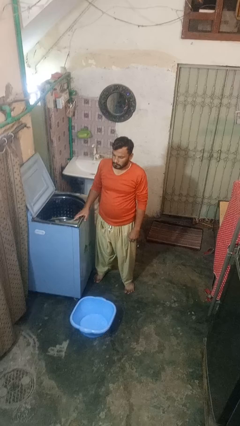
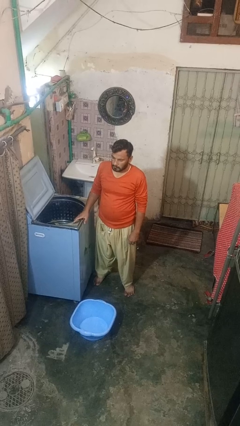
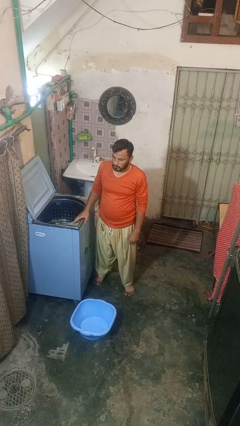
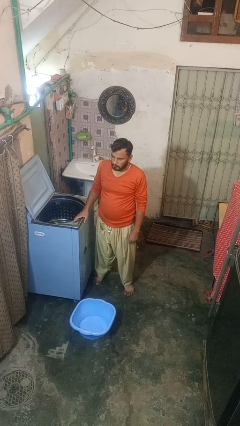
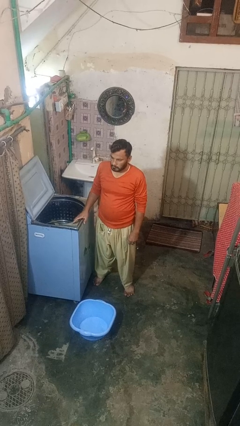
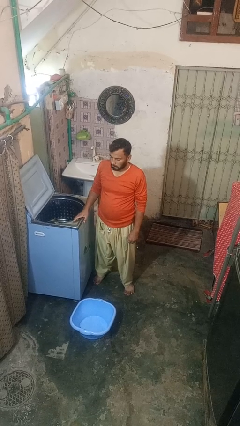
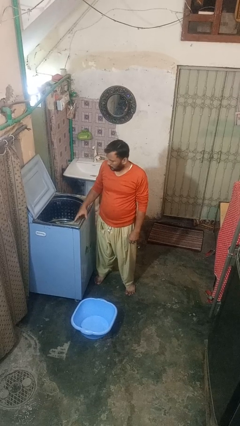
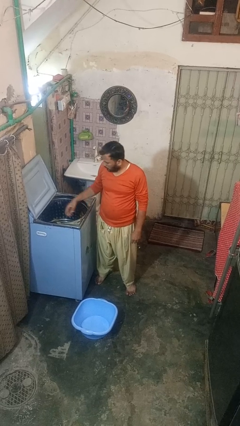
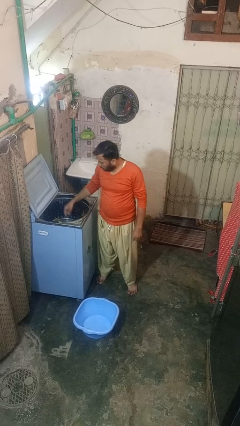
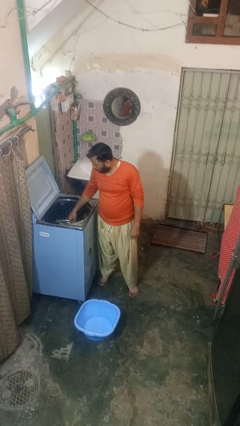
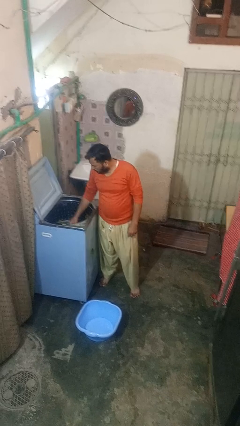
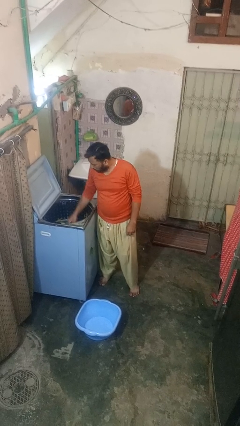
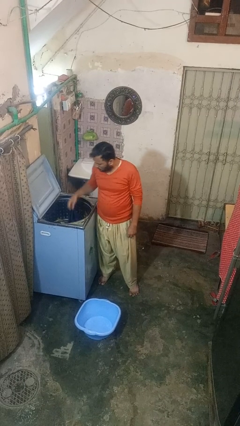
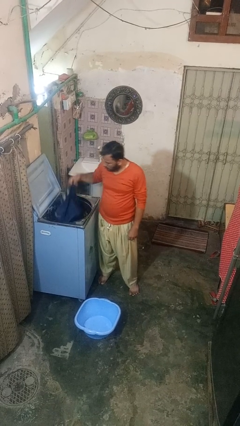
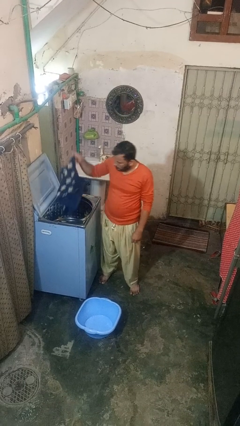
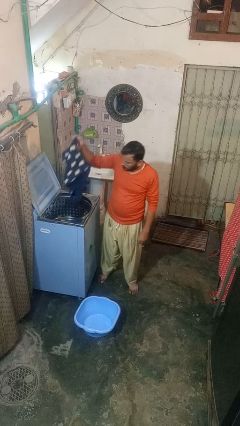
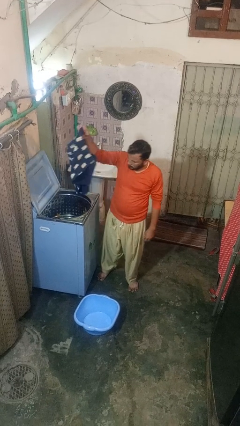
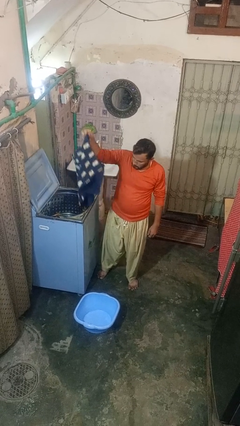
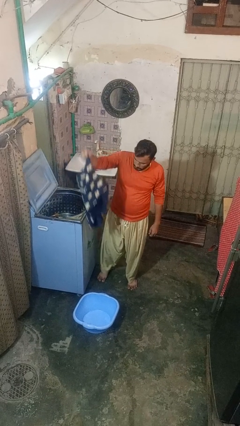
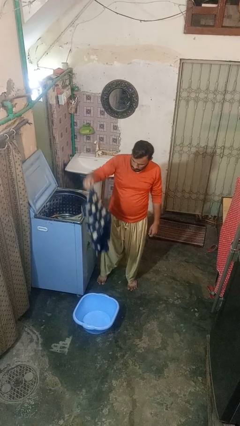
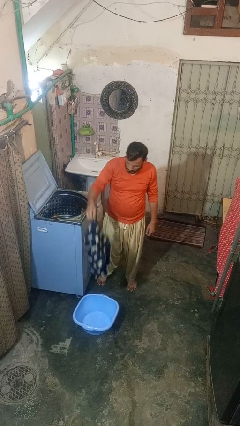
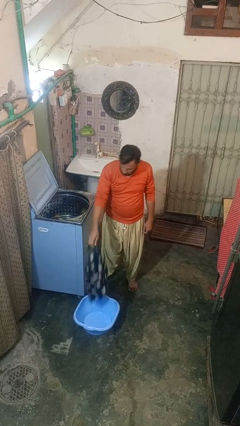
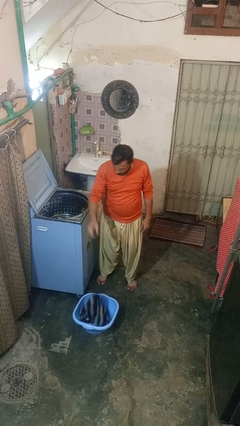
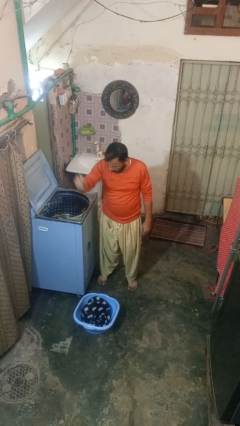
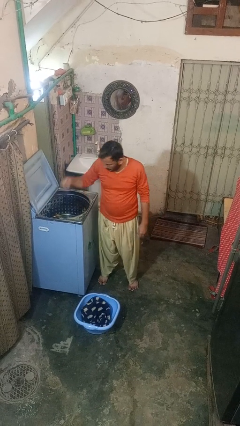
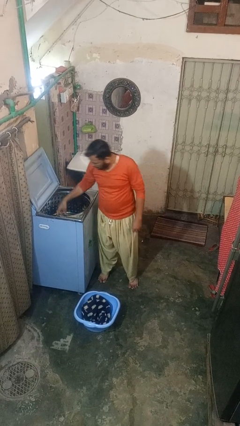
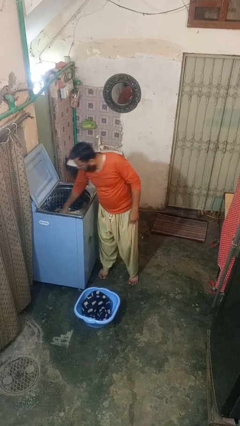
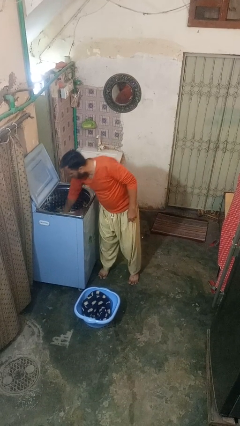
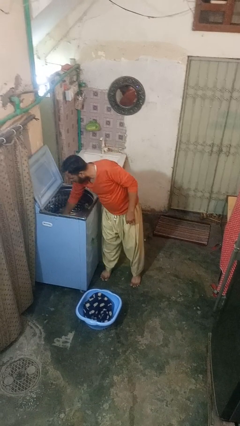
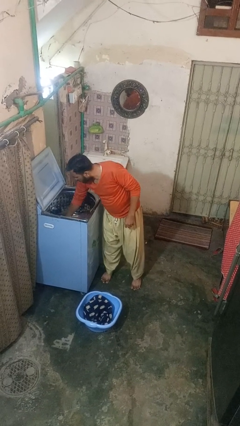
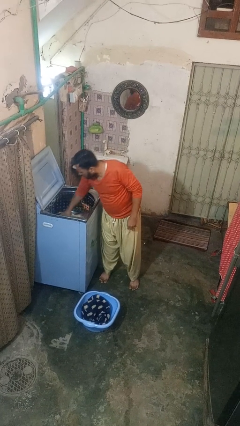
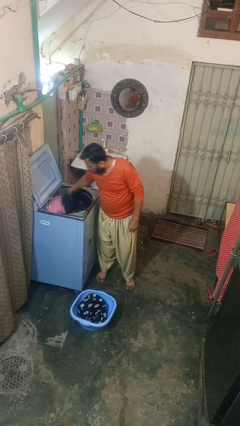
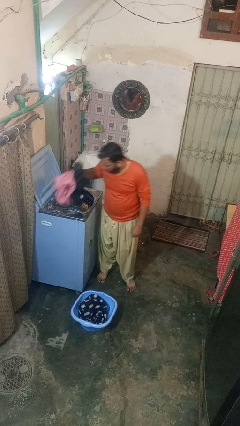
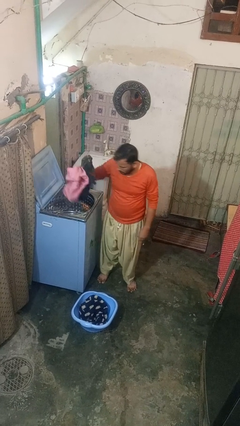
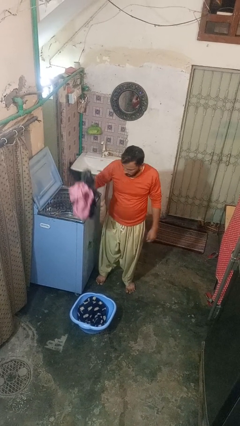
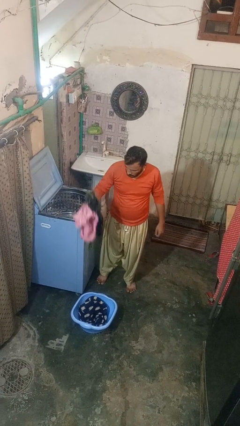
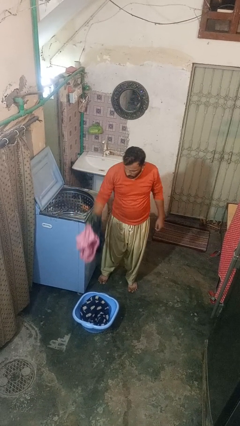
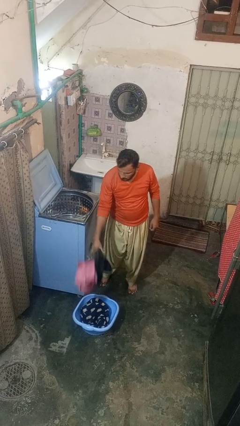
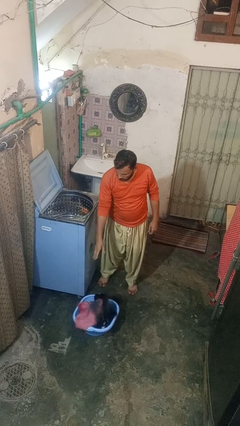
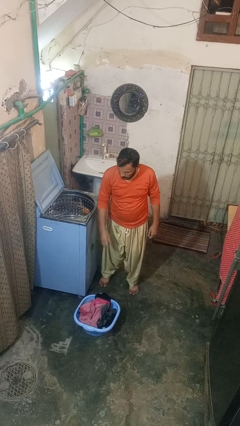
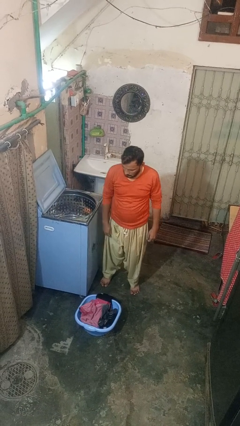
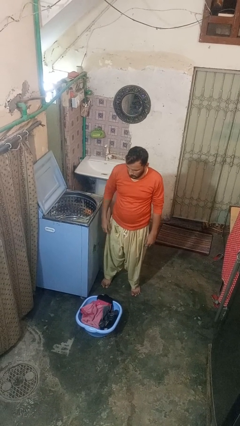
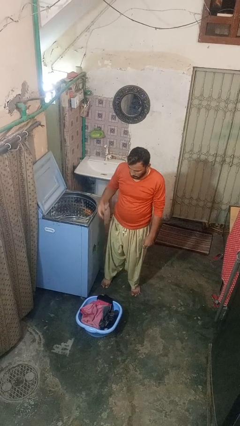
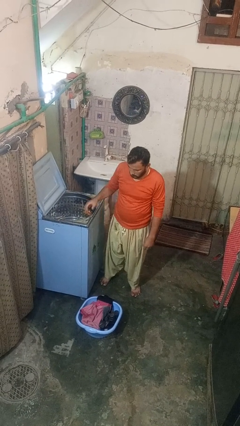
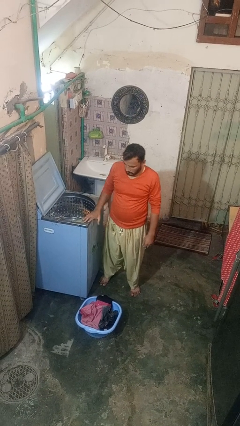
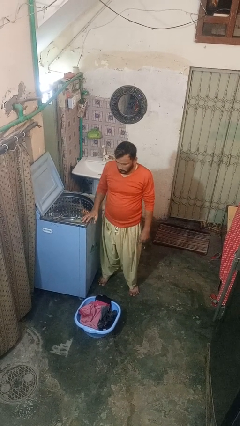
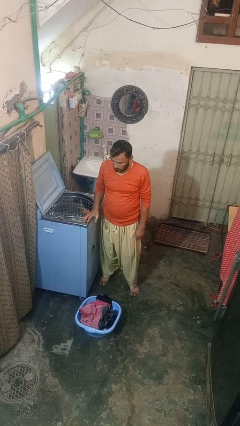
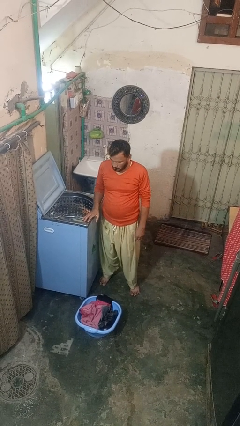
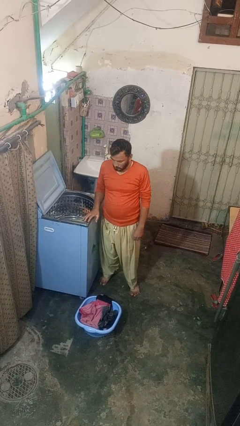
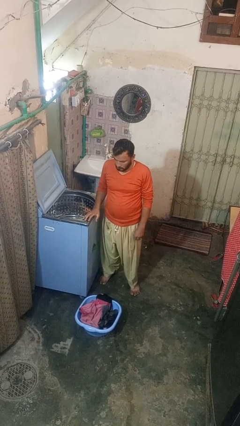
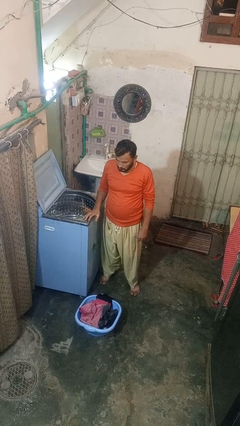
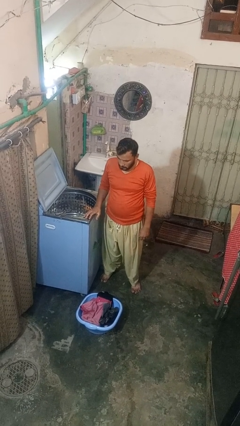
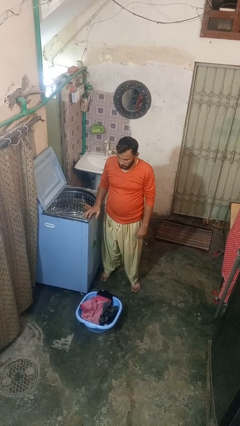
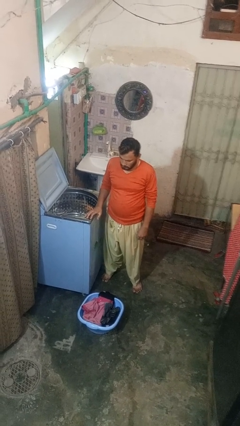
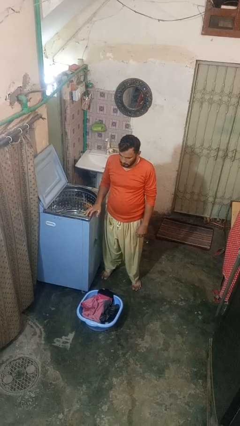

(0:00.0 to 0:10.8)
person unloads clotheswasher

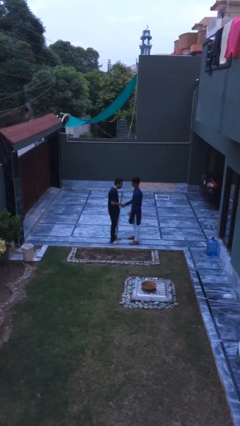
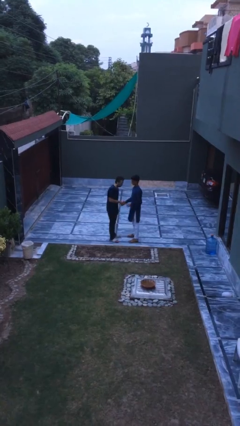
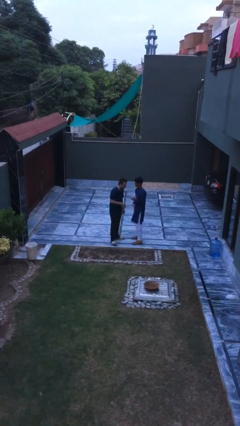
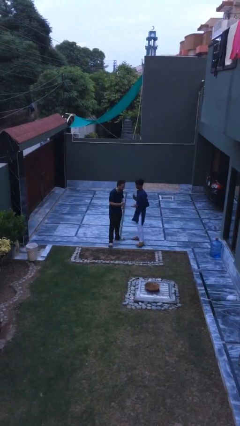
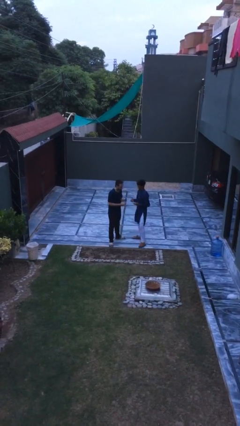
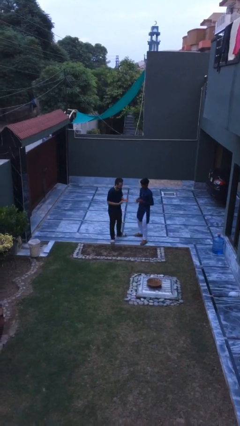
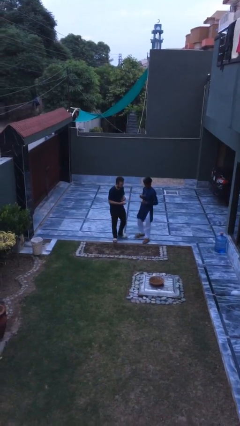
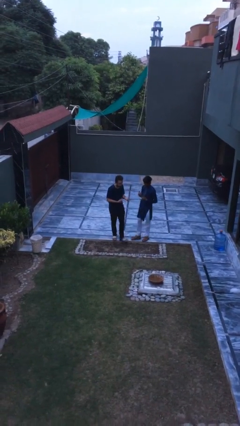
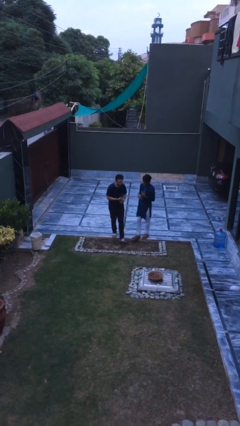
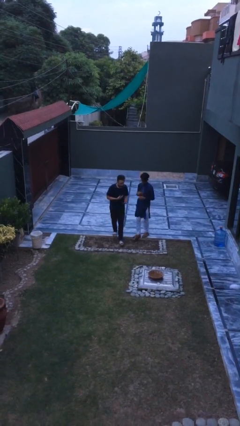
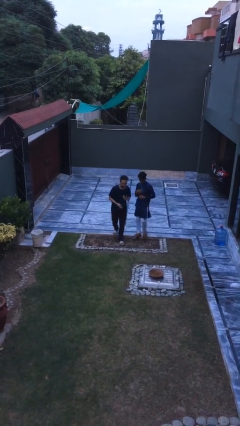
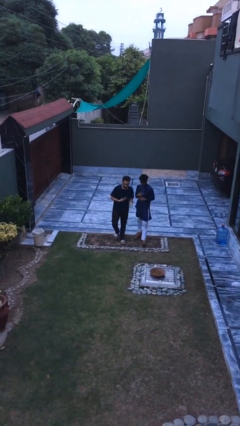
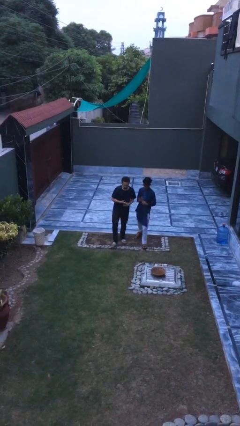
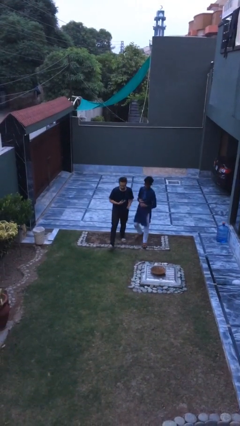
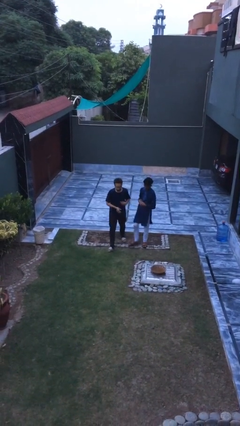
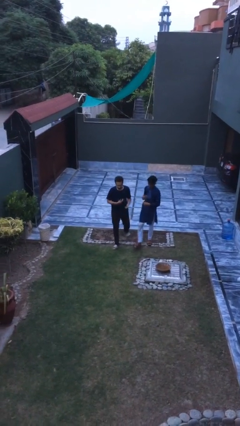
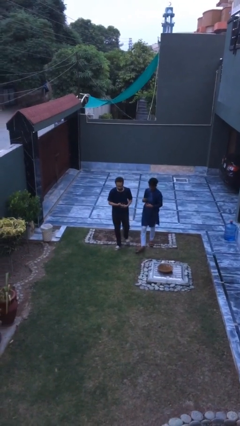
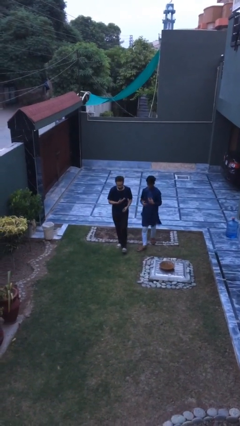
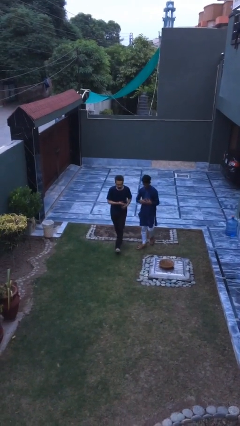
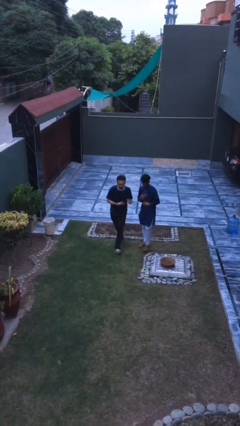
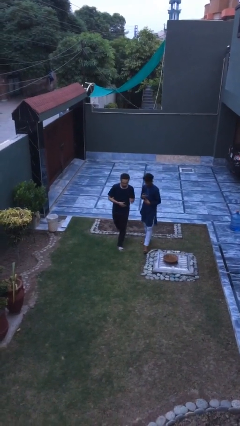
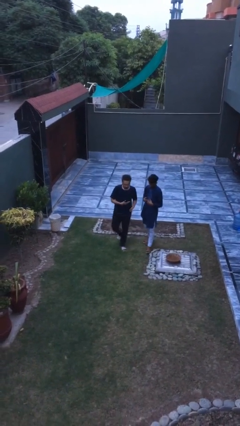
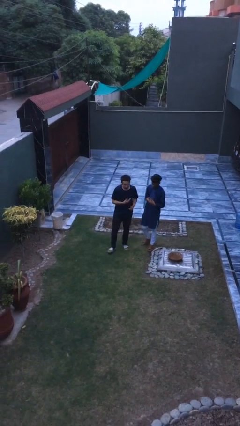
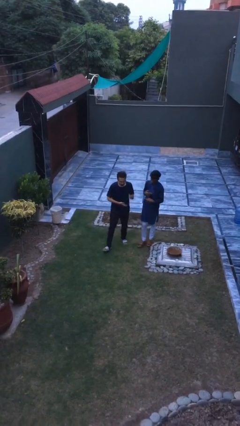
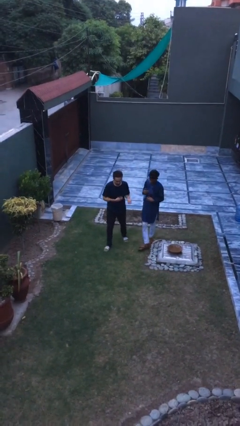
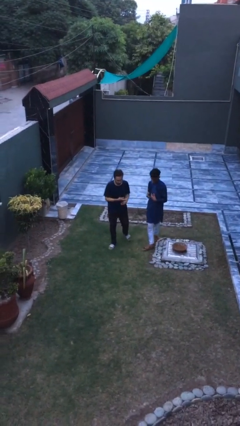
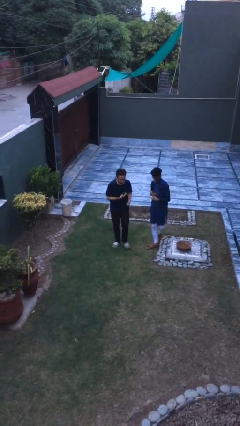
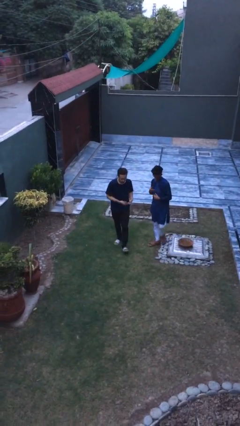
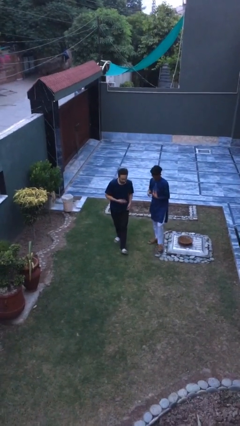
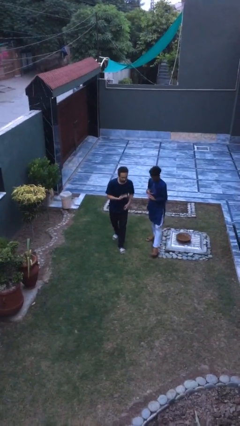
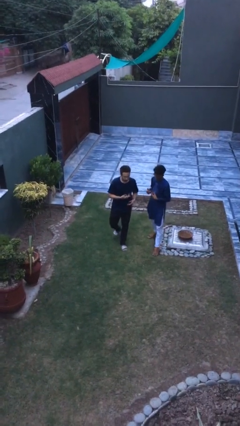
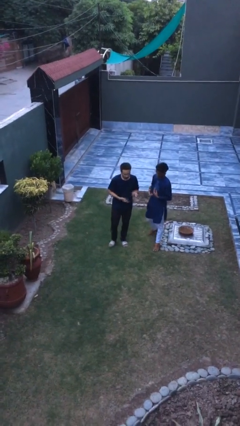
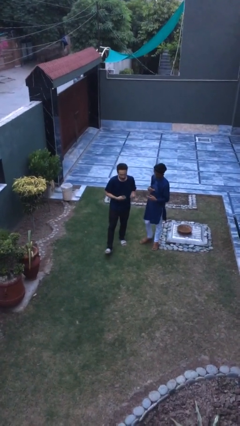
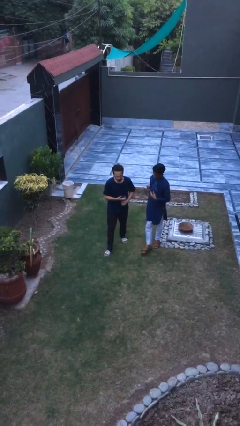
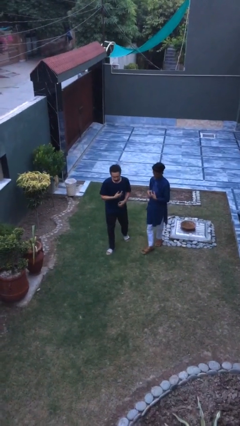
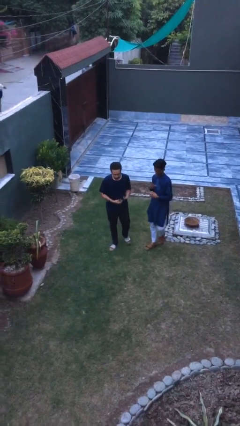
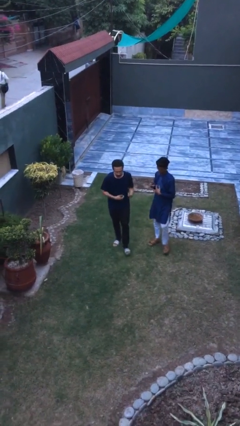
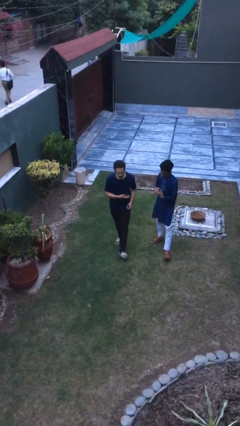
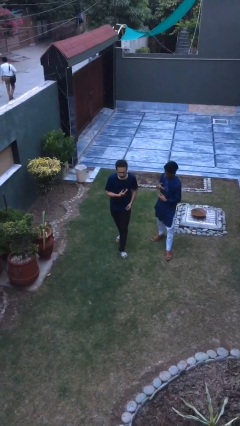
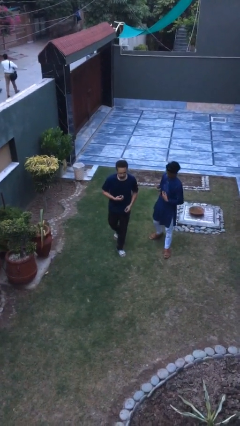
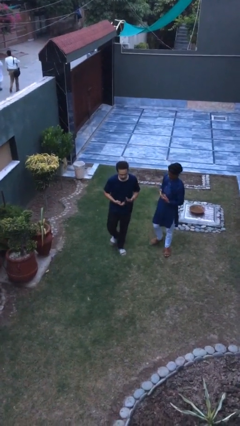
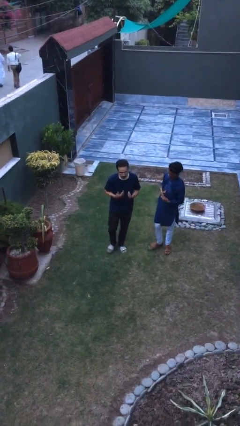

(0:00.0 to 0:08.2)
person talks to person
